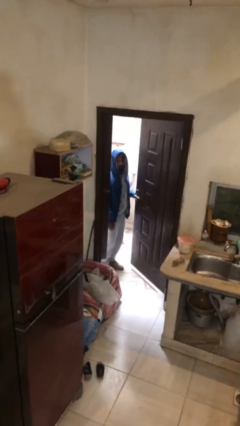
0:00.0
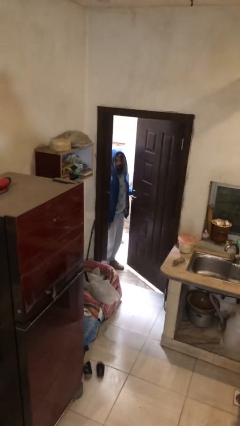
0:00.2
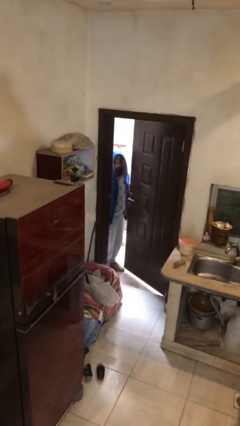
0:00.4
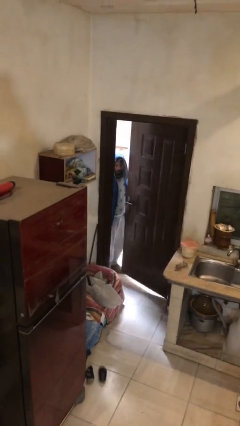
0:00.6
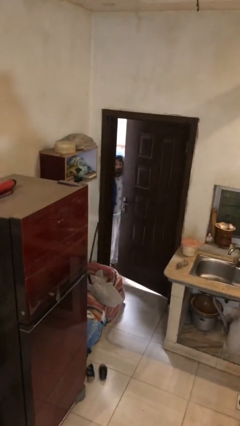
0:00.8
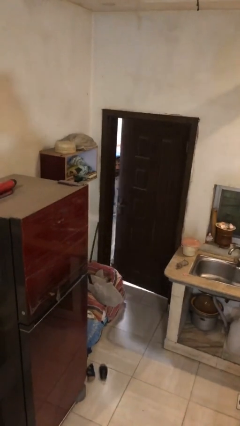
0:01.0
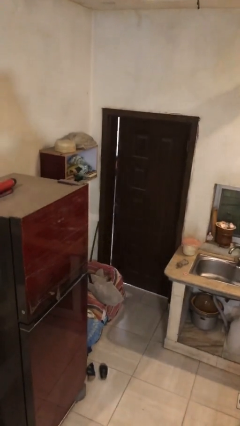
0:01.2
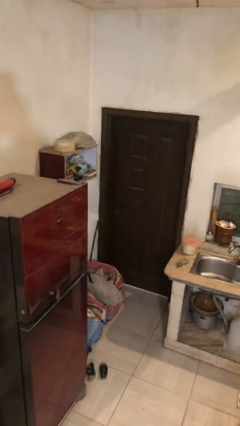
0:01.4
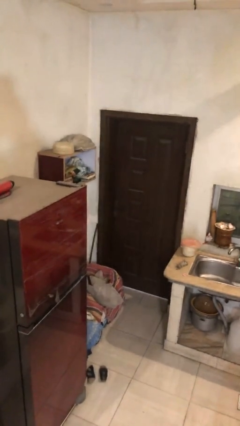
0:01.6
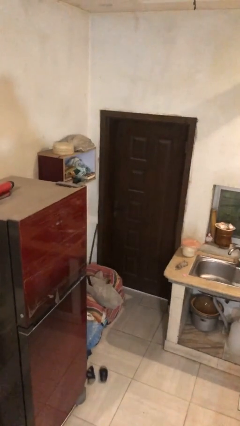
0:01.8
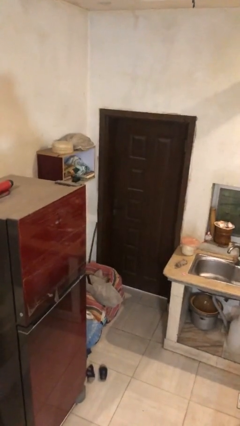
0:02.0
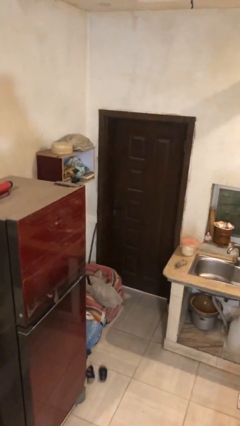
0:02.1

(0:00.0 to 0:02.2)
person closes facility door

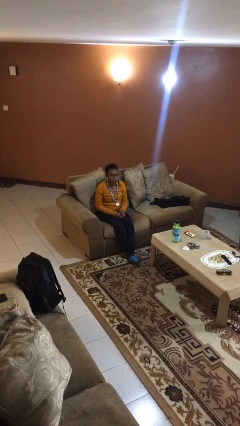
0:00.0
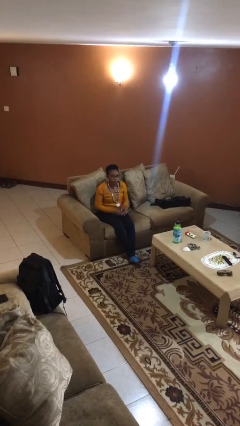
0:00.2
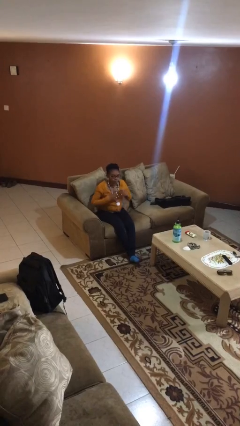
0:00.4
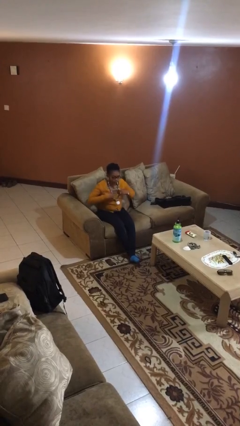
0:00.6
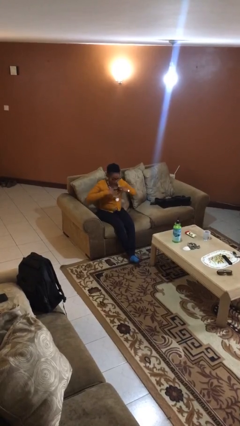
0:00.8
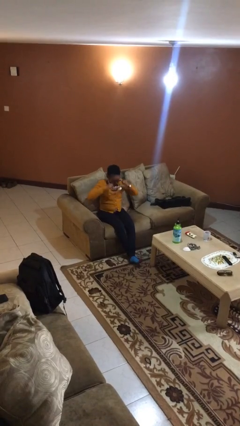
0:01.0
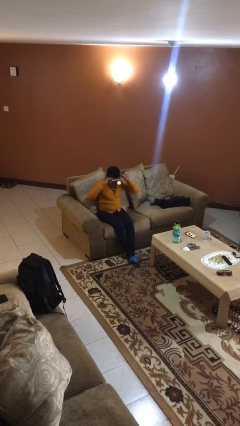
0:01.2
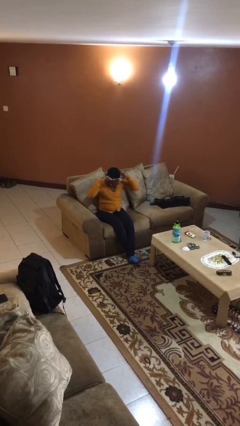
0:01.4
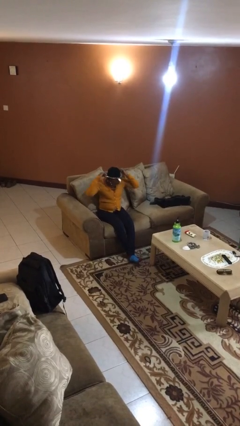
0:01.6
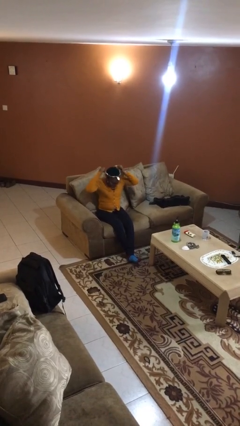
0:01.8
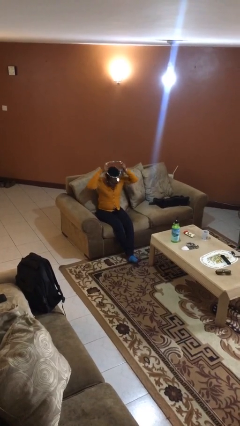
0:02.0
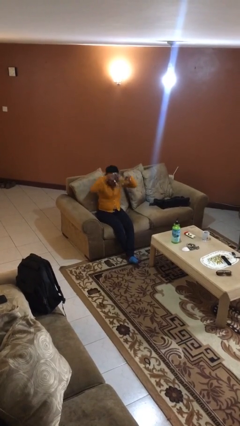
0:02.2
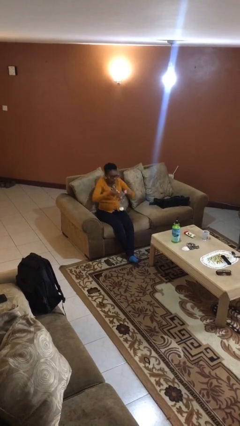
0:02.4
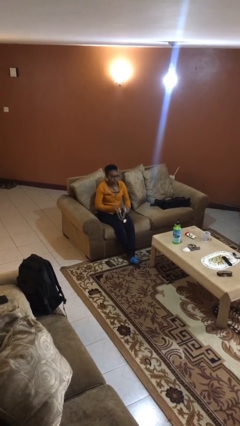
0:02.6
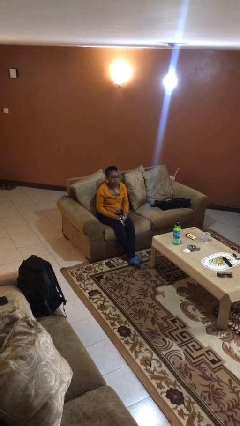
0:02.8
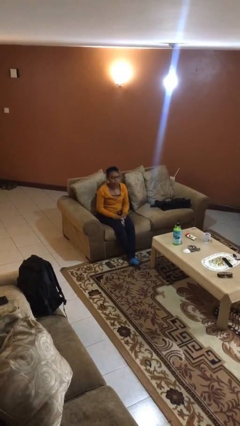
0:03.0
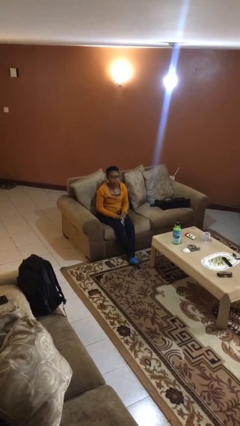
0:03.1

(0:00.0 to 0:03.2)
person takes off necklace

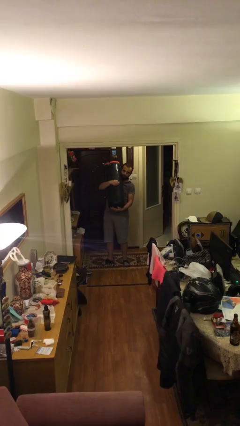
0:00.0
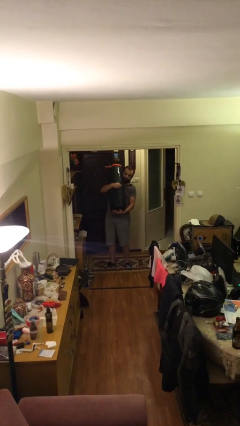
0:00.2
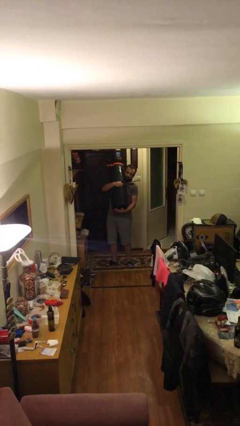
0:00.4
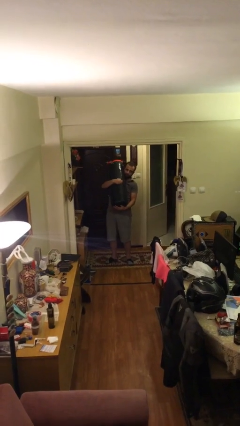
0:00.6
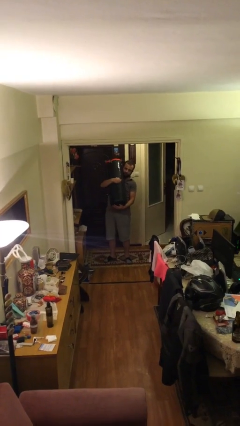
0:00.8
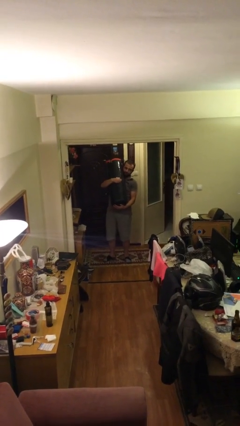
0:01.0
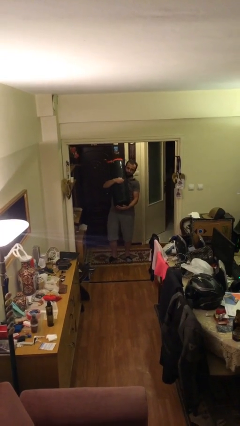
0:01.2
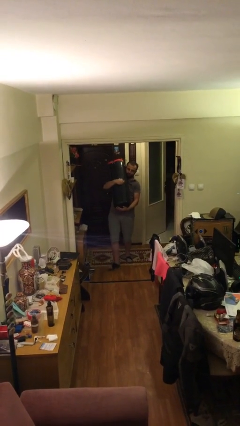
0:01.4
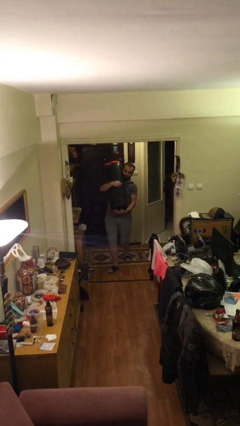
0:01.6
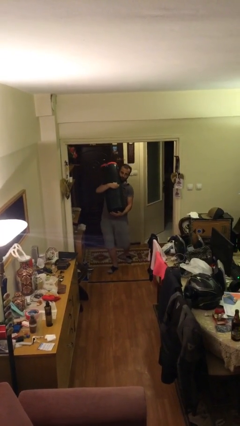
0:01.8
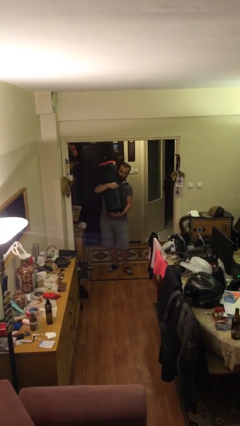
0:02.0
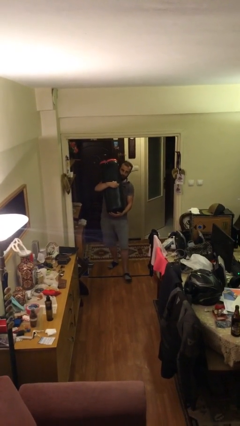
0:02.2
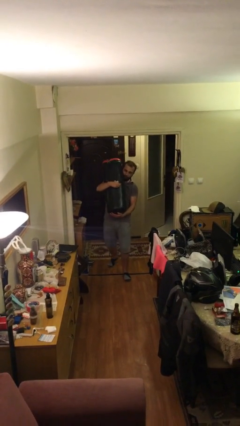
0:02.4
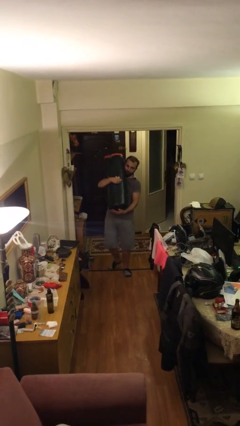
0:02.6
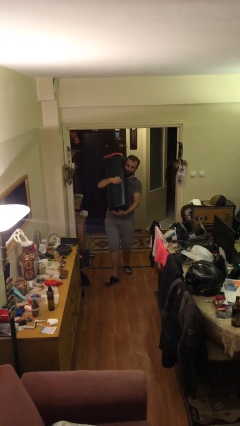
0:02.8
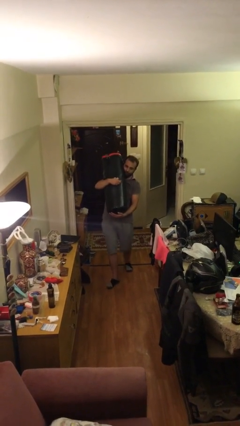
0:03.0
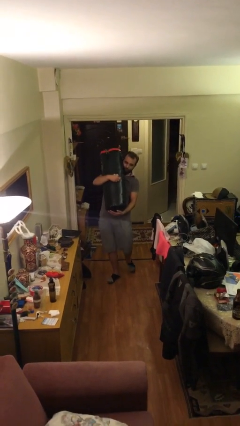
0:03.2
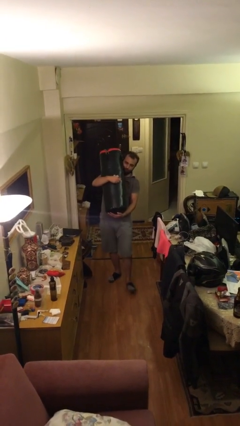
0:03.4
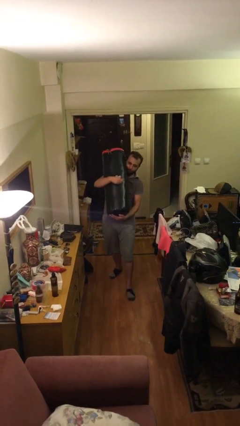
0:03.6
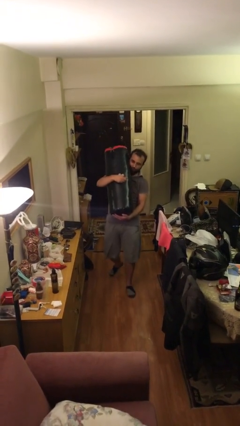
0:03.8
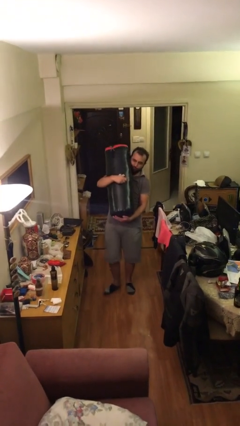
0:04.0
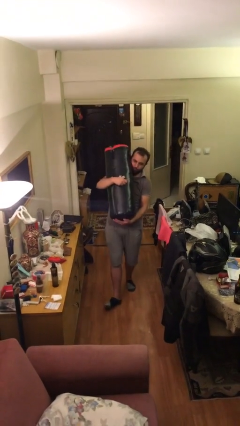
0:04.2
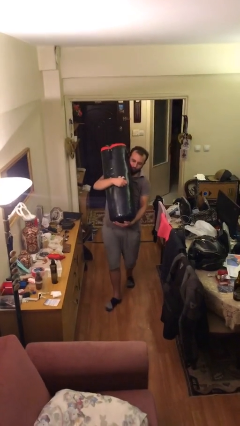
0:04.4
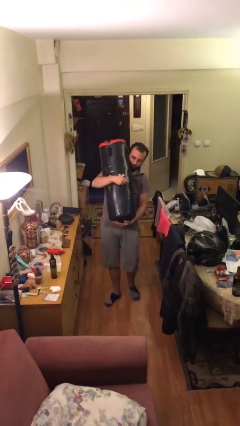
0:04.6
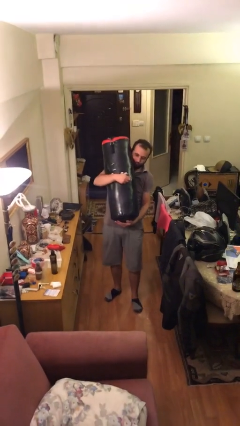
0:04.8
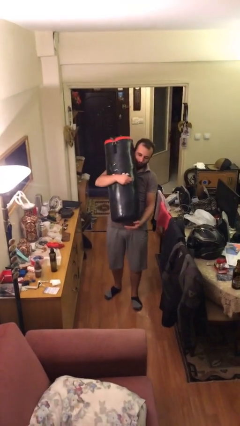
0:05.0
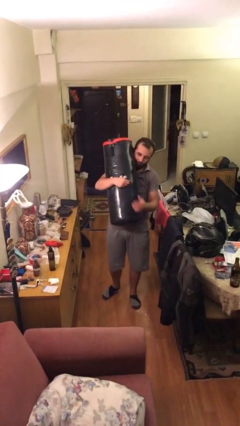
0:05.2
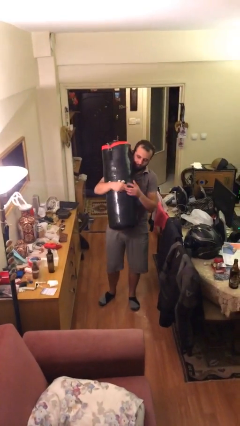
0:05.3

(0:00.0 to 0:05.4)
person carries heavy object

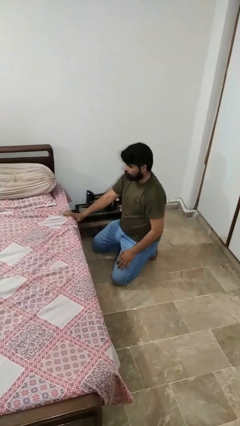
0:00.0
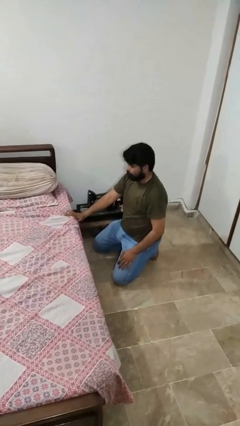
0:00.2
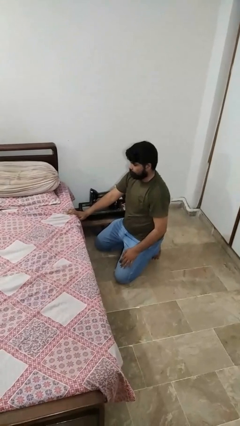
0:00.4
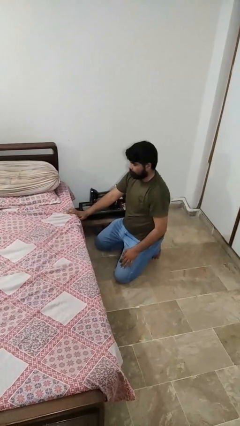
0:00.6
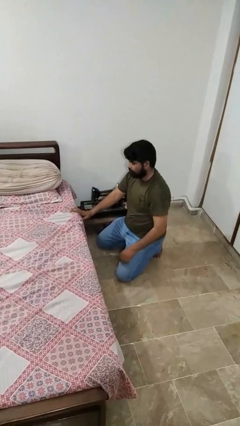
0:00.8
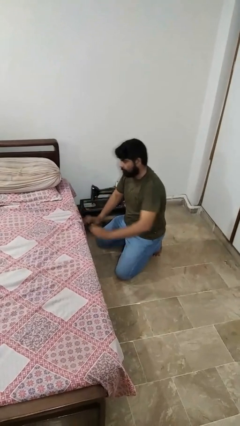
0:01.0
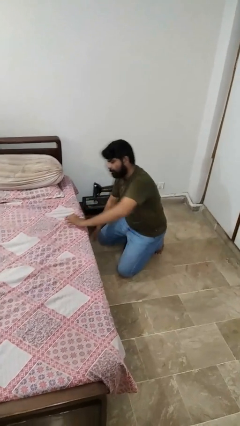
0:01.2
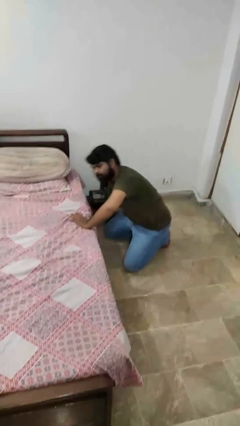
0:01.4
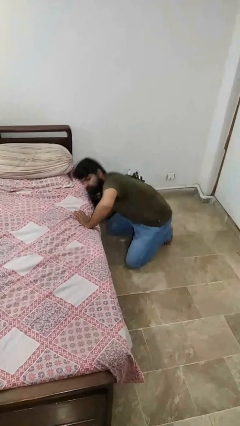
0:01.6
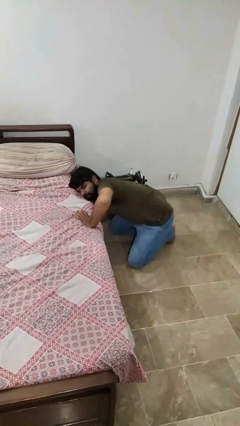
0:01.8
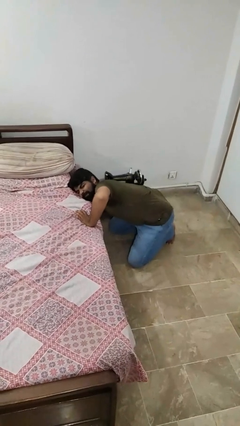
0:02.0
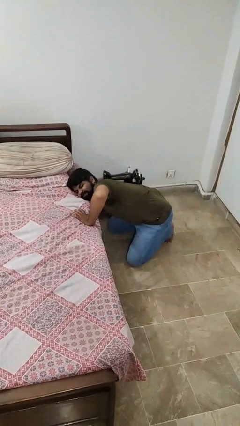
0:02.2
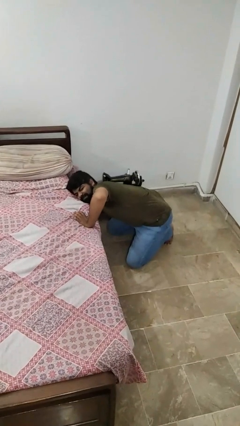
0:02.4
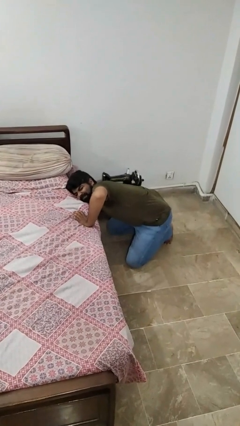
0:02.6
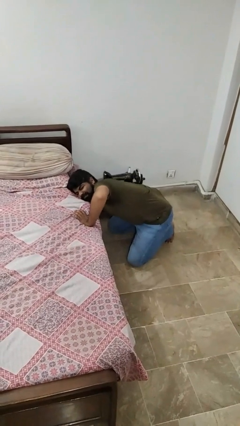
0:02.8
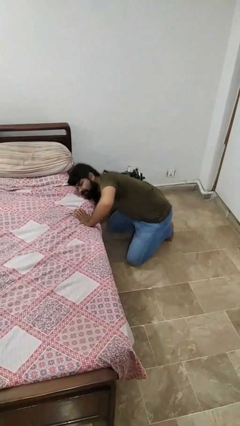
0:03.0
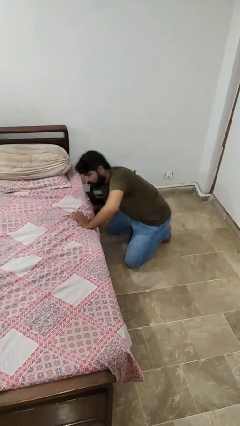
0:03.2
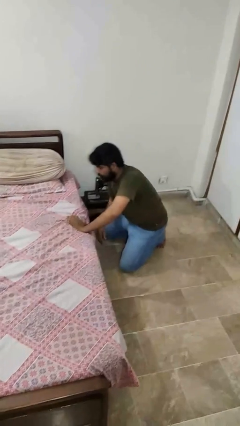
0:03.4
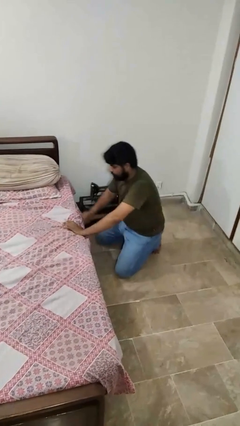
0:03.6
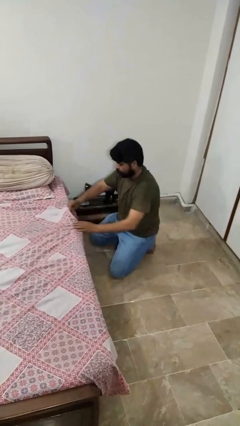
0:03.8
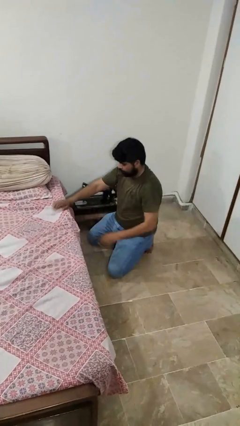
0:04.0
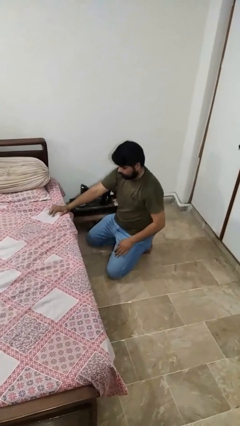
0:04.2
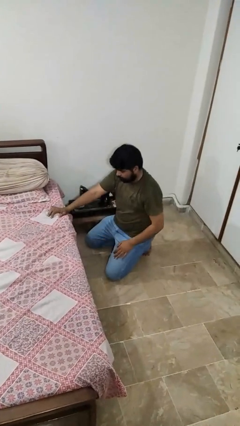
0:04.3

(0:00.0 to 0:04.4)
person searches under bed

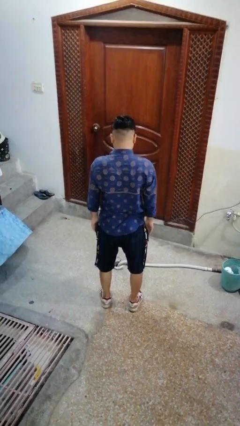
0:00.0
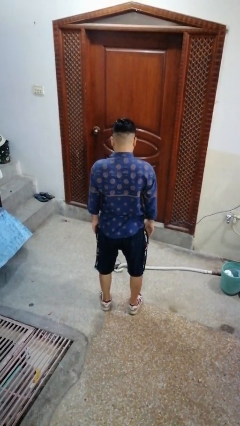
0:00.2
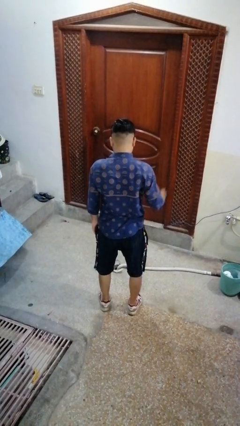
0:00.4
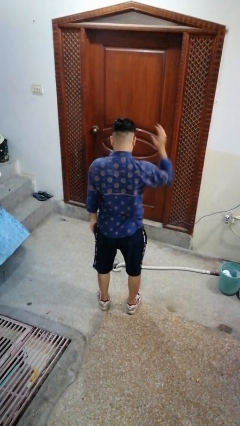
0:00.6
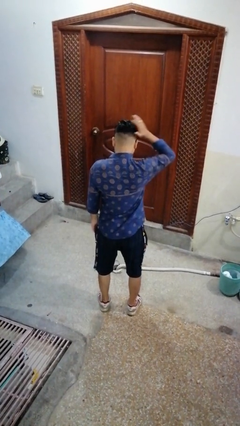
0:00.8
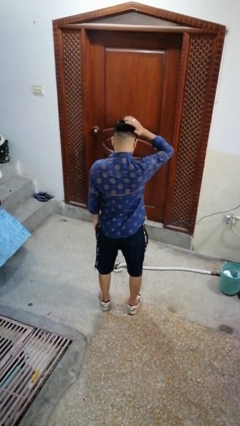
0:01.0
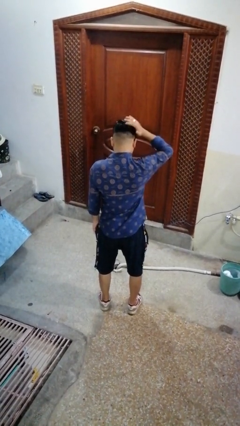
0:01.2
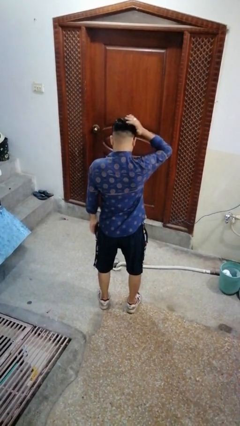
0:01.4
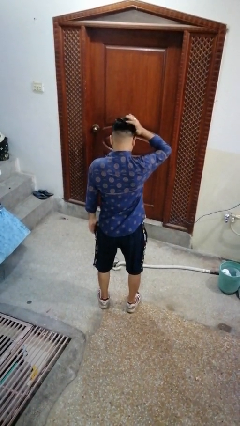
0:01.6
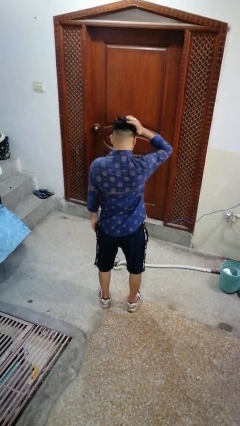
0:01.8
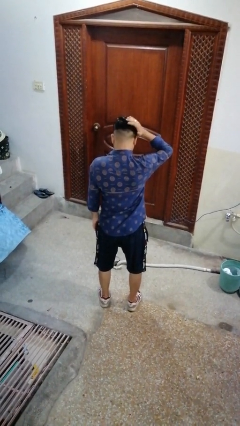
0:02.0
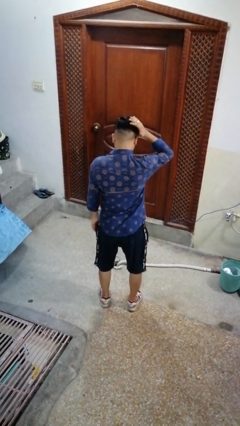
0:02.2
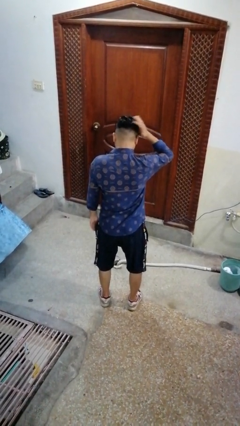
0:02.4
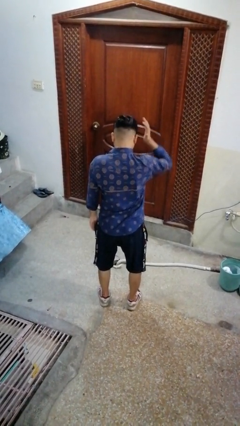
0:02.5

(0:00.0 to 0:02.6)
person pats head
